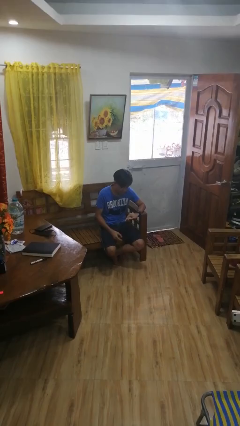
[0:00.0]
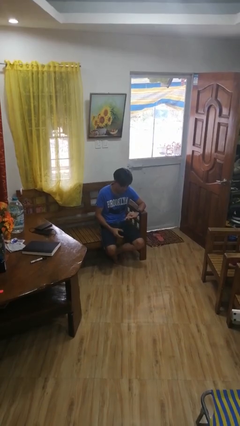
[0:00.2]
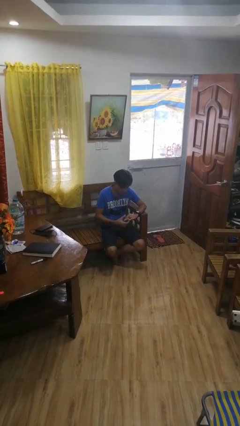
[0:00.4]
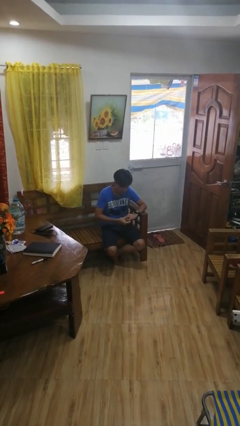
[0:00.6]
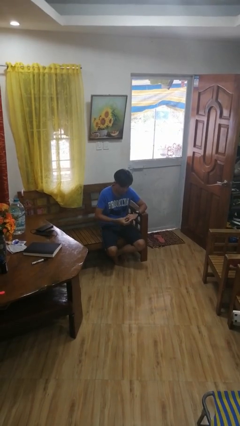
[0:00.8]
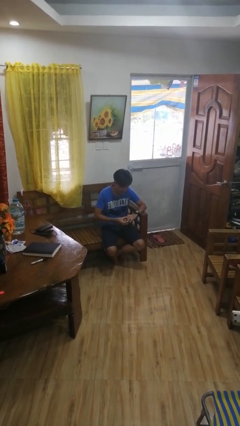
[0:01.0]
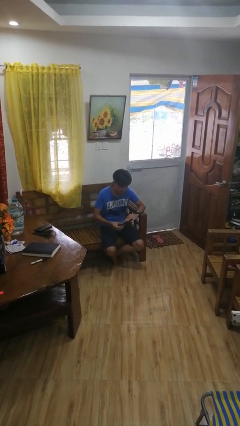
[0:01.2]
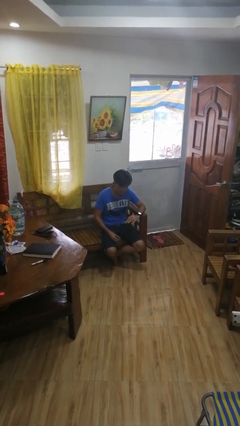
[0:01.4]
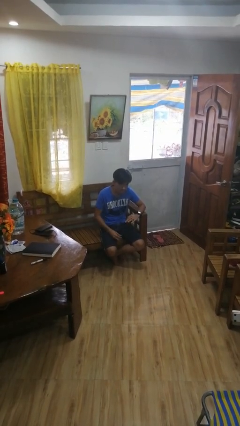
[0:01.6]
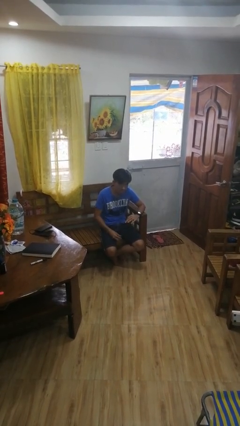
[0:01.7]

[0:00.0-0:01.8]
person takes off ring

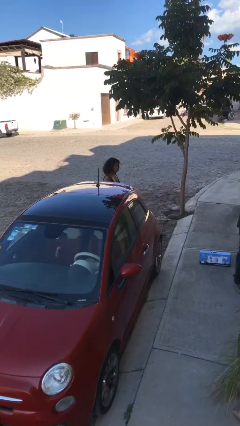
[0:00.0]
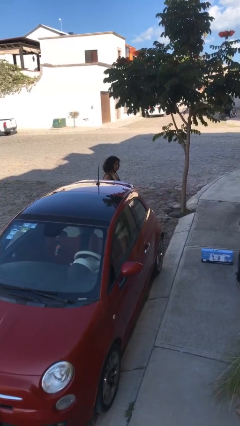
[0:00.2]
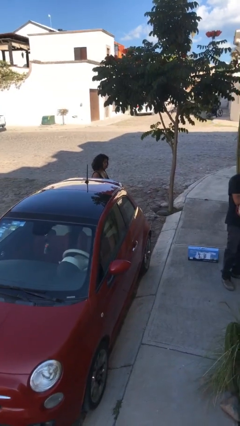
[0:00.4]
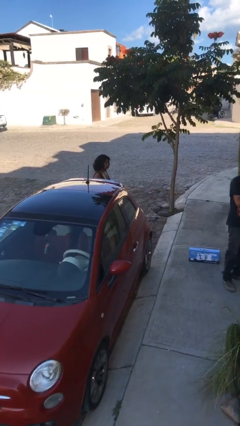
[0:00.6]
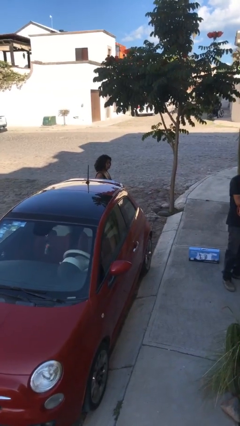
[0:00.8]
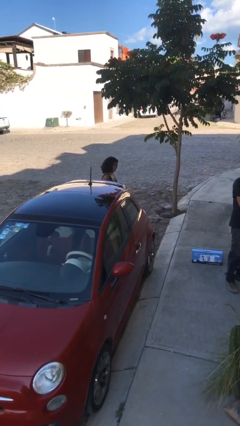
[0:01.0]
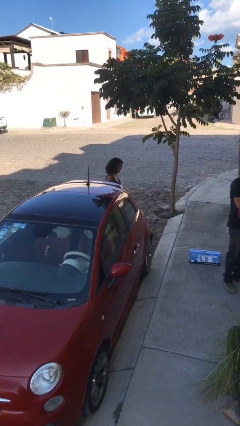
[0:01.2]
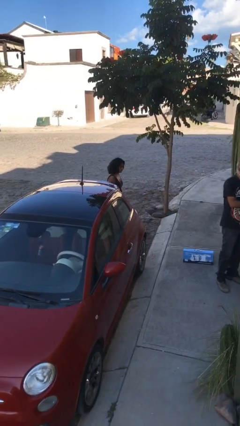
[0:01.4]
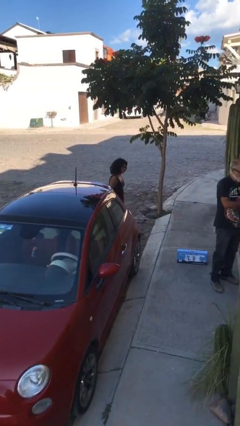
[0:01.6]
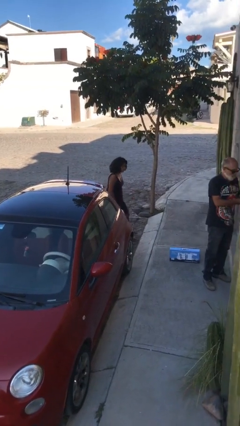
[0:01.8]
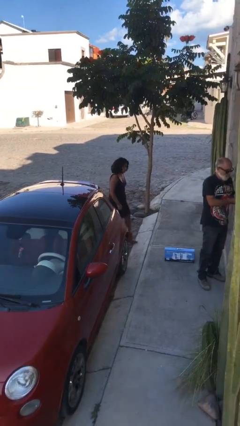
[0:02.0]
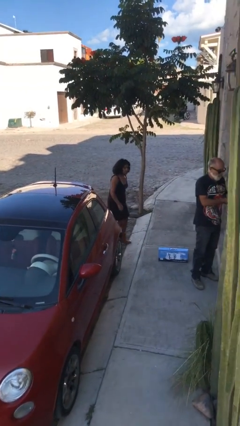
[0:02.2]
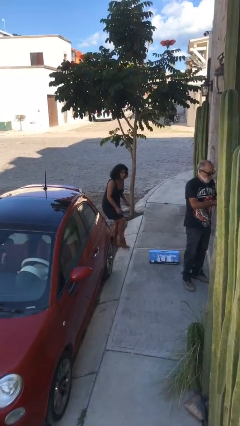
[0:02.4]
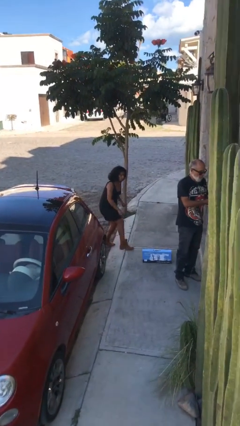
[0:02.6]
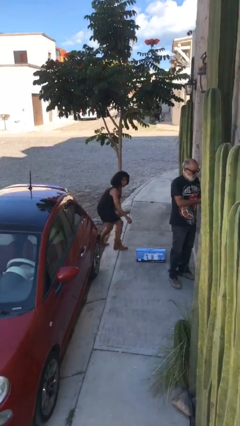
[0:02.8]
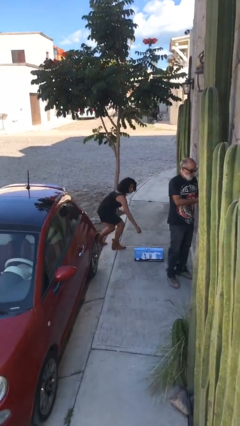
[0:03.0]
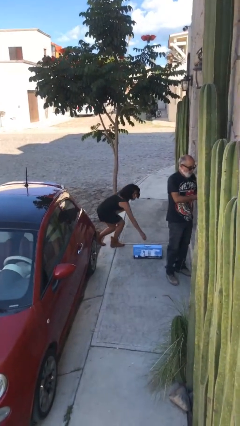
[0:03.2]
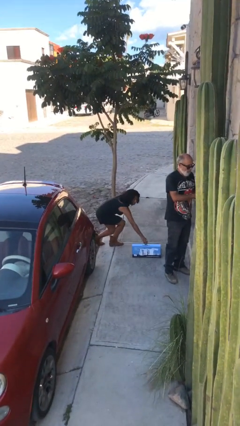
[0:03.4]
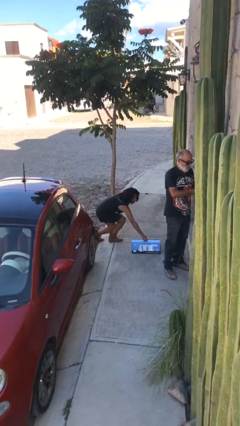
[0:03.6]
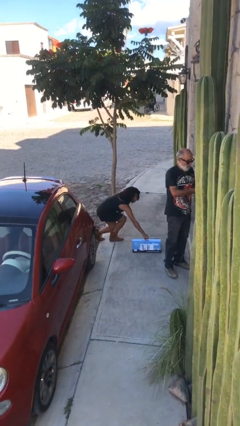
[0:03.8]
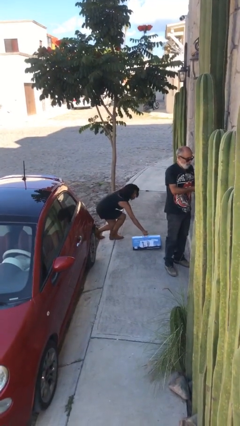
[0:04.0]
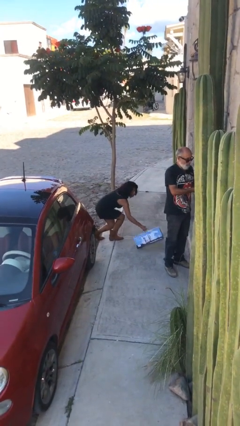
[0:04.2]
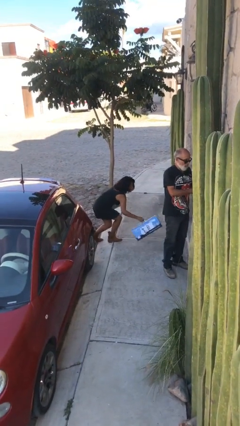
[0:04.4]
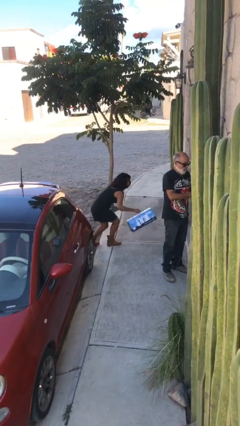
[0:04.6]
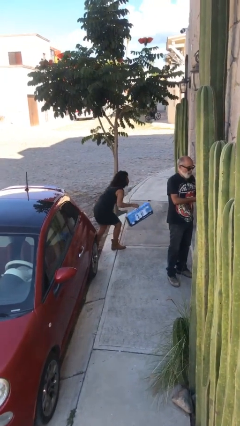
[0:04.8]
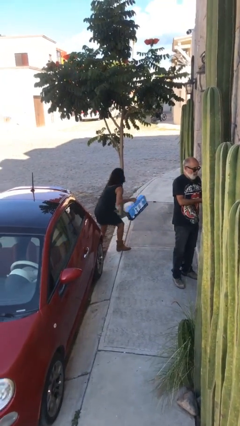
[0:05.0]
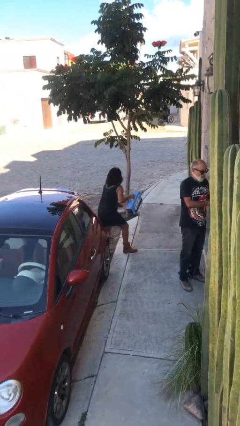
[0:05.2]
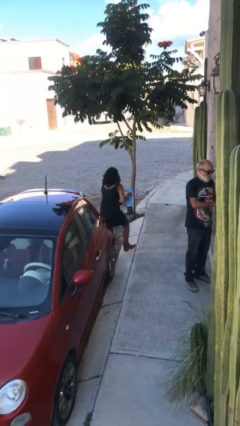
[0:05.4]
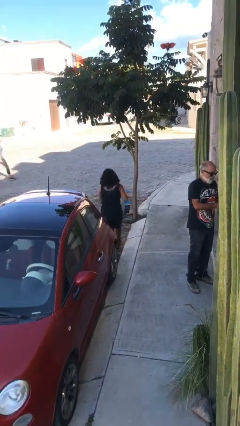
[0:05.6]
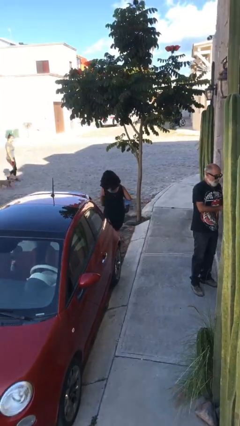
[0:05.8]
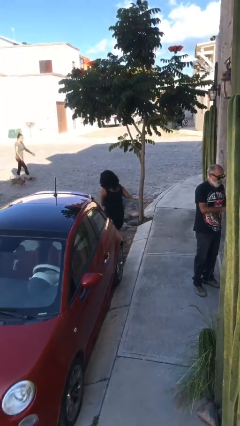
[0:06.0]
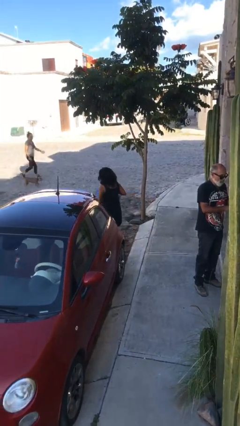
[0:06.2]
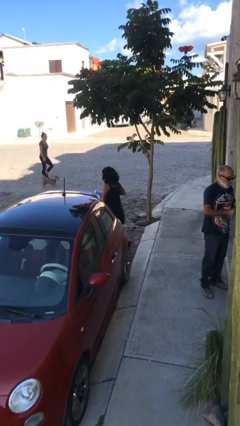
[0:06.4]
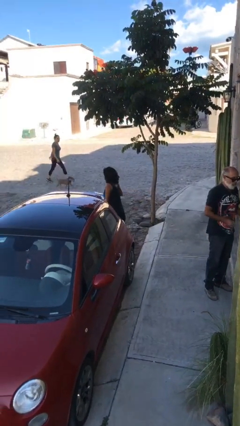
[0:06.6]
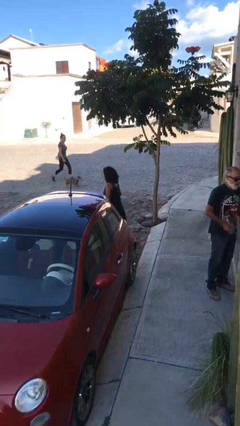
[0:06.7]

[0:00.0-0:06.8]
person steals object from person

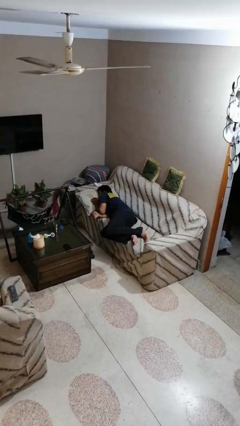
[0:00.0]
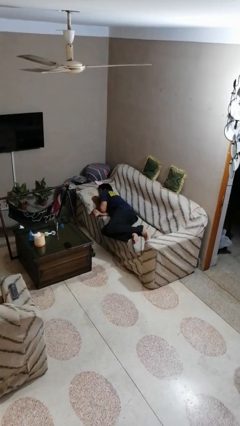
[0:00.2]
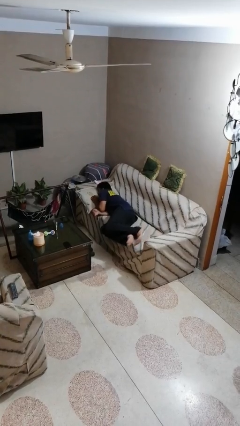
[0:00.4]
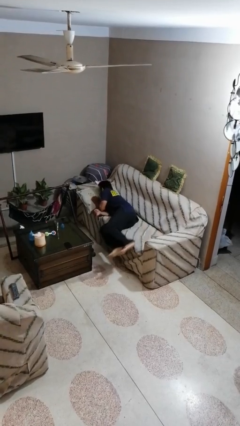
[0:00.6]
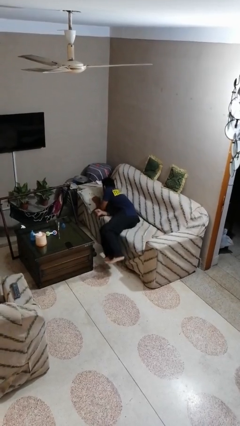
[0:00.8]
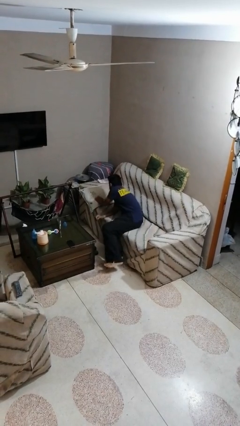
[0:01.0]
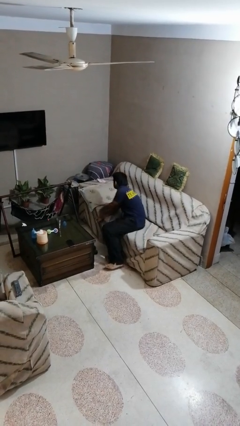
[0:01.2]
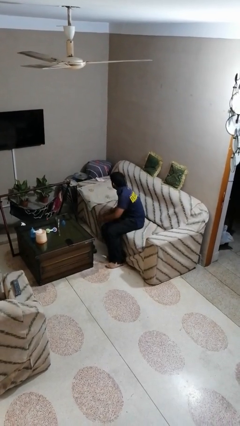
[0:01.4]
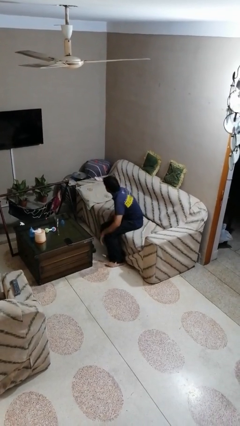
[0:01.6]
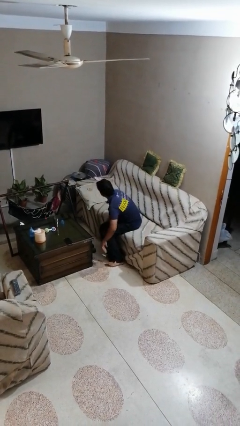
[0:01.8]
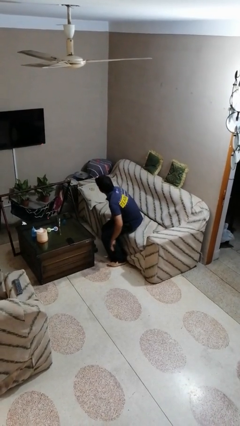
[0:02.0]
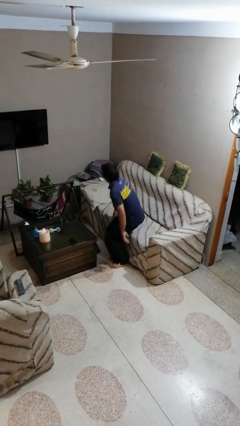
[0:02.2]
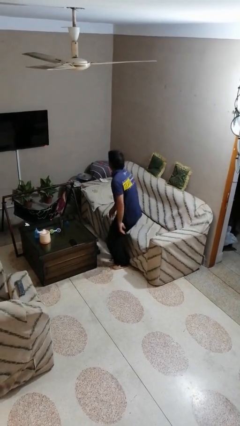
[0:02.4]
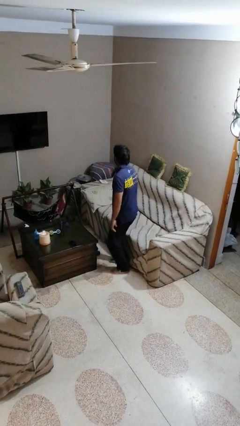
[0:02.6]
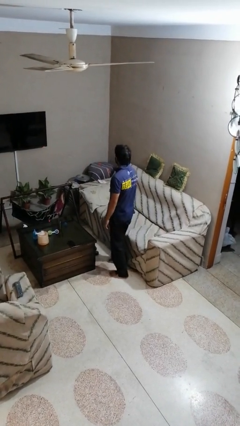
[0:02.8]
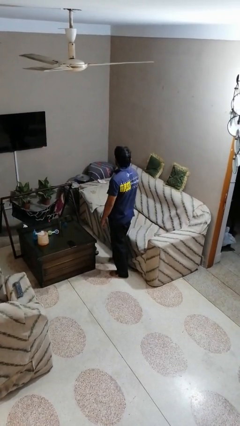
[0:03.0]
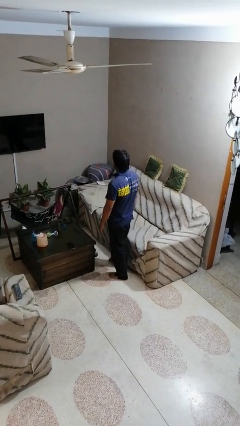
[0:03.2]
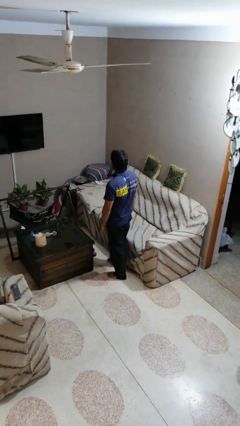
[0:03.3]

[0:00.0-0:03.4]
person stands up

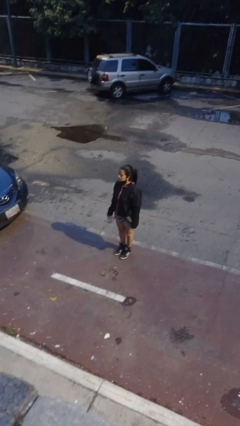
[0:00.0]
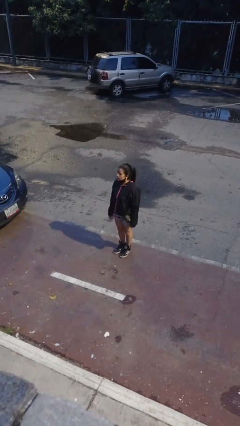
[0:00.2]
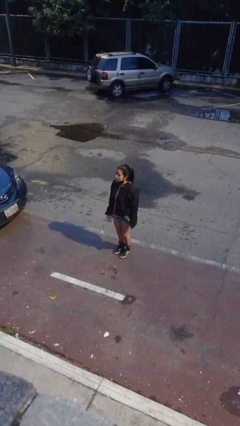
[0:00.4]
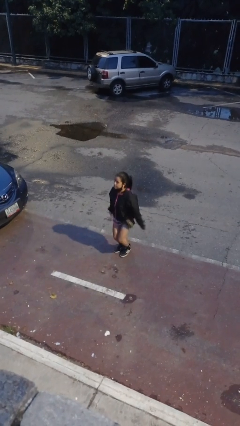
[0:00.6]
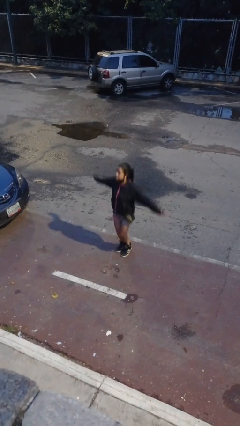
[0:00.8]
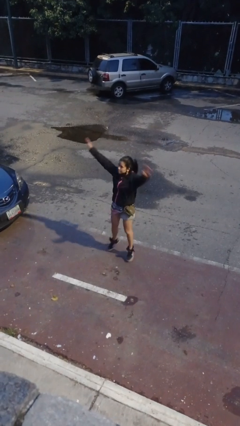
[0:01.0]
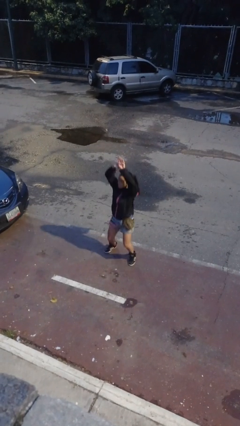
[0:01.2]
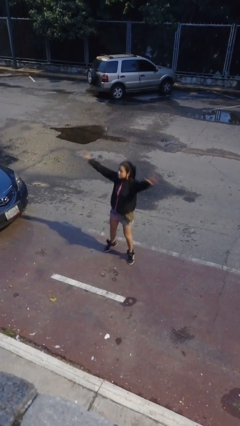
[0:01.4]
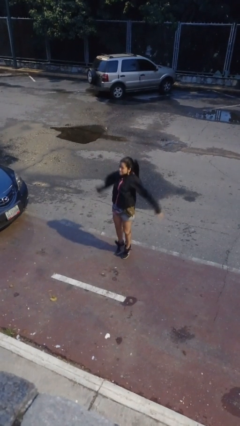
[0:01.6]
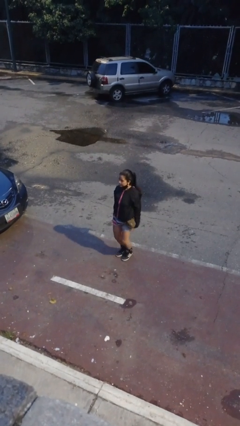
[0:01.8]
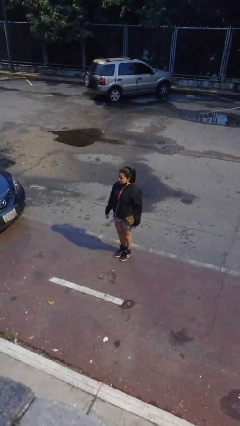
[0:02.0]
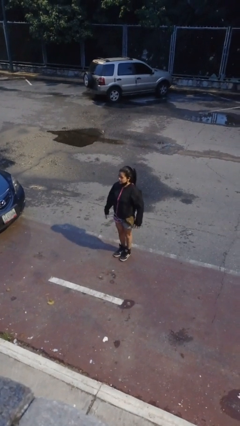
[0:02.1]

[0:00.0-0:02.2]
person exercises with jumping jacks

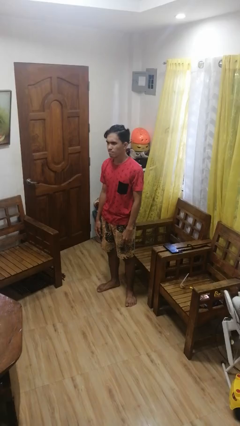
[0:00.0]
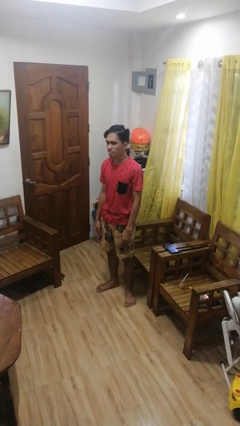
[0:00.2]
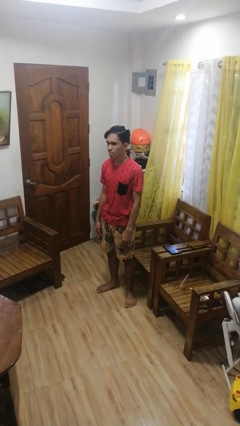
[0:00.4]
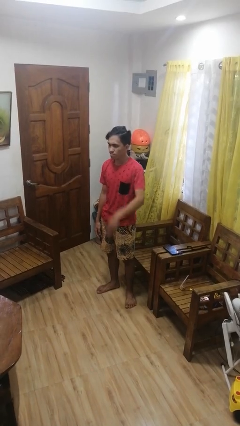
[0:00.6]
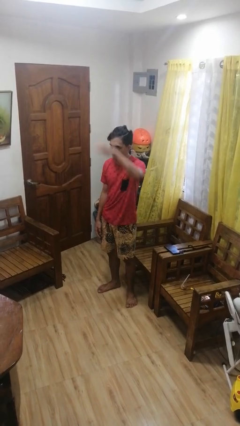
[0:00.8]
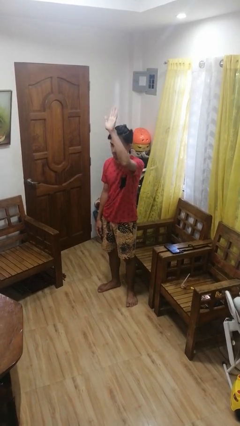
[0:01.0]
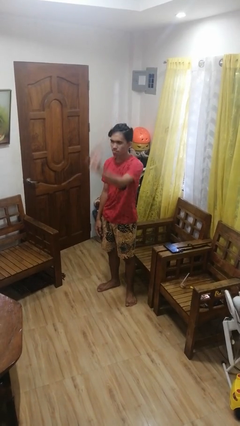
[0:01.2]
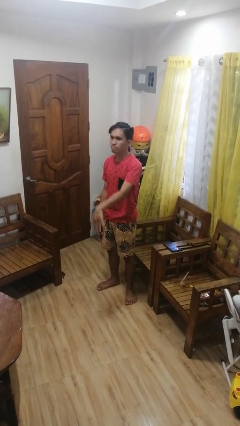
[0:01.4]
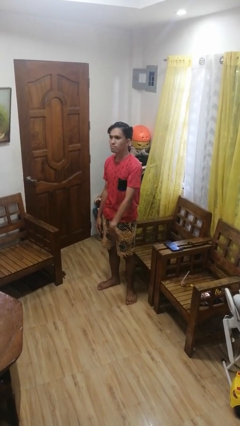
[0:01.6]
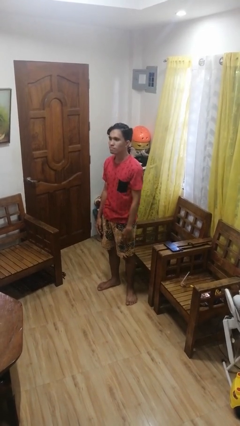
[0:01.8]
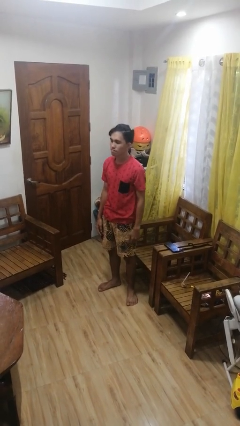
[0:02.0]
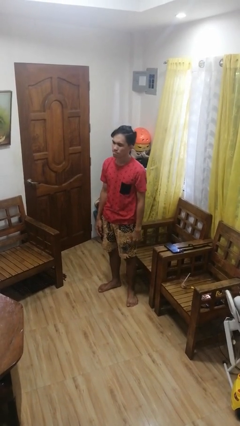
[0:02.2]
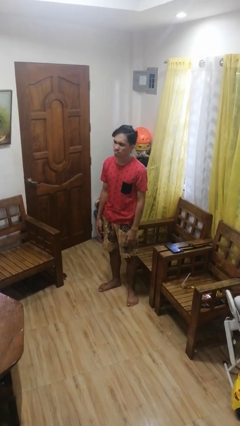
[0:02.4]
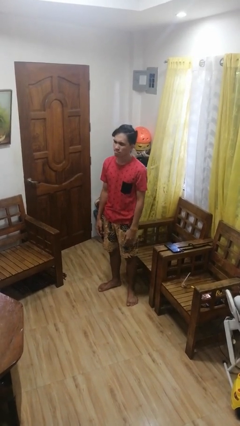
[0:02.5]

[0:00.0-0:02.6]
person gestures swipe down

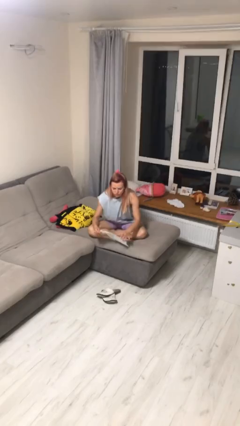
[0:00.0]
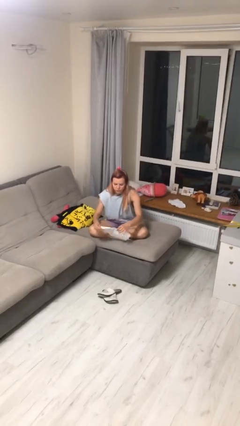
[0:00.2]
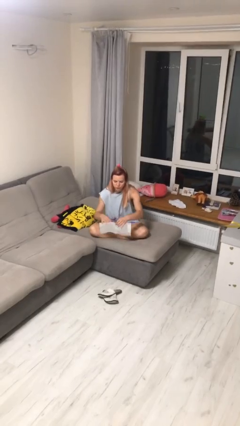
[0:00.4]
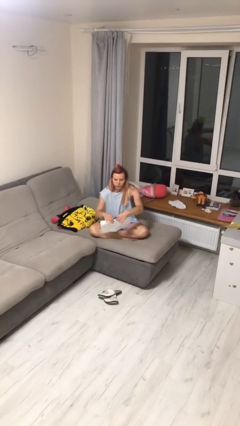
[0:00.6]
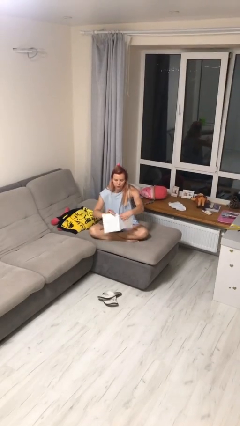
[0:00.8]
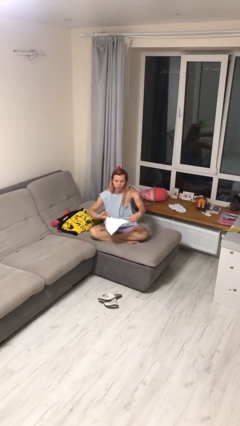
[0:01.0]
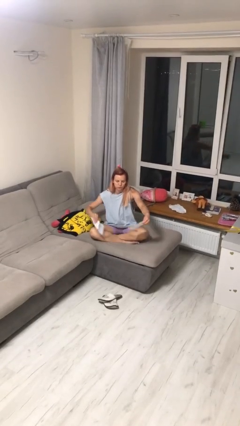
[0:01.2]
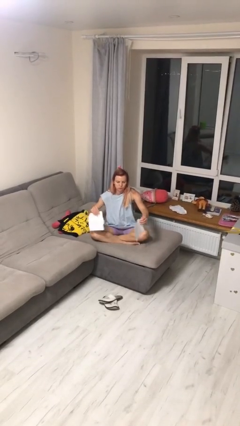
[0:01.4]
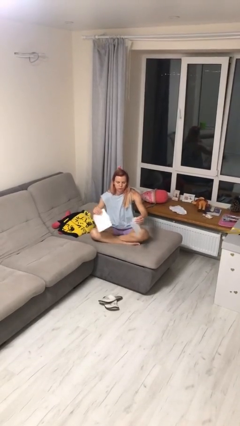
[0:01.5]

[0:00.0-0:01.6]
person tears paper
